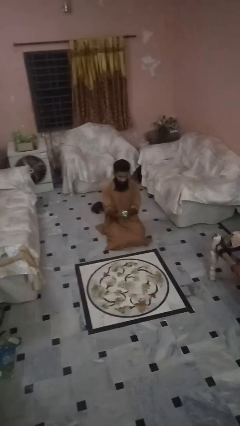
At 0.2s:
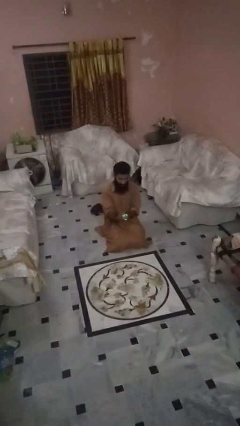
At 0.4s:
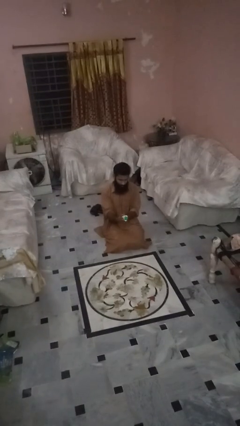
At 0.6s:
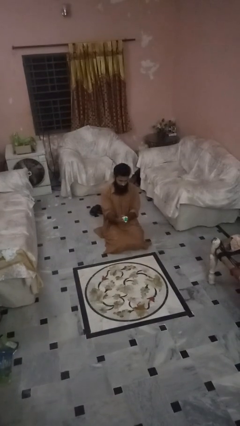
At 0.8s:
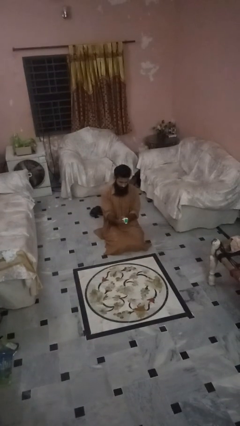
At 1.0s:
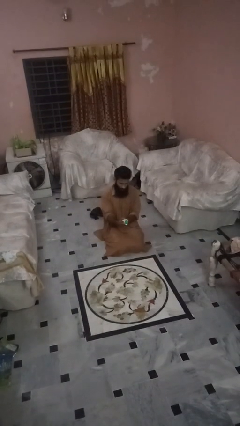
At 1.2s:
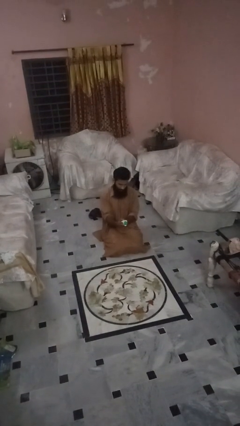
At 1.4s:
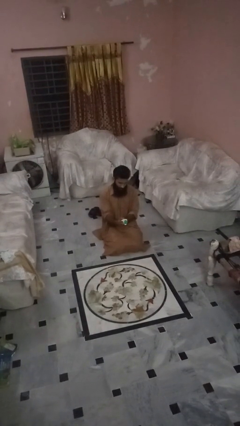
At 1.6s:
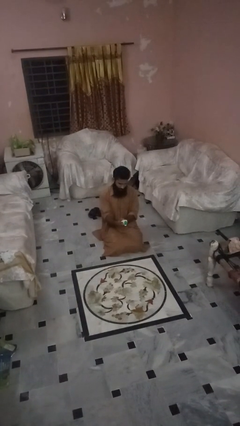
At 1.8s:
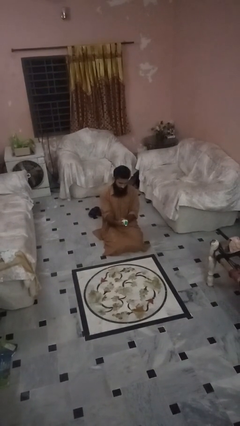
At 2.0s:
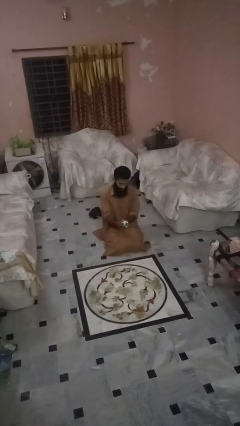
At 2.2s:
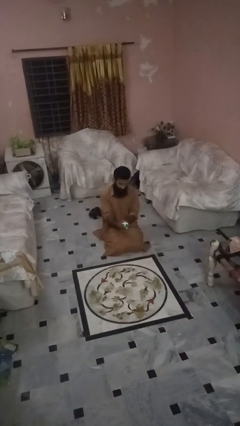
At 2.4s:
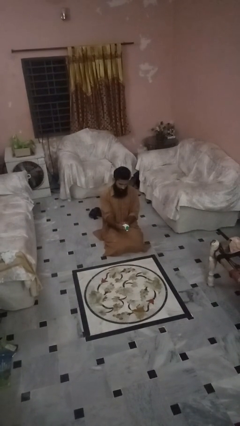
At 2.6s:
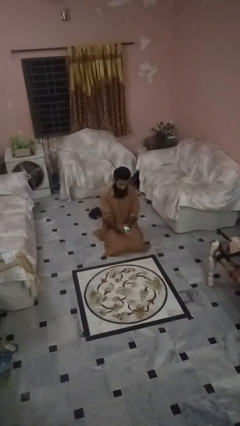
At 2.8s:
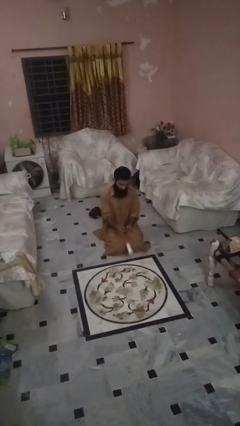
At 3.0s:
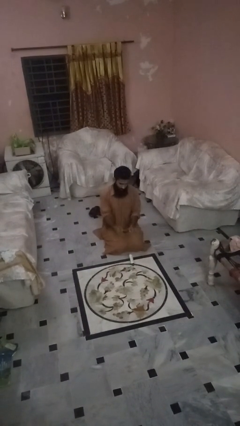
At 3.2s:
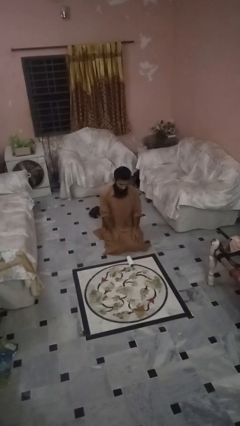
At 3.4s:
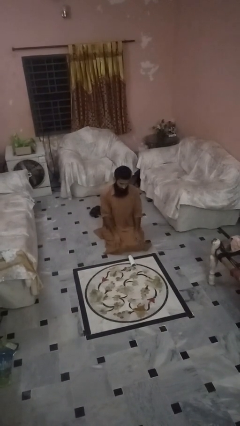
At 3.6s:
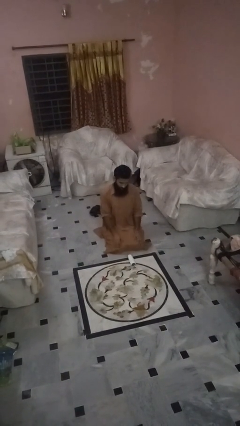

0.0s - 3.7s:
person catches dropped object

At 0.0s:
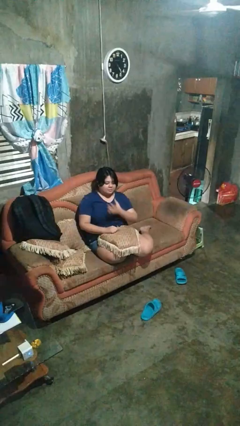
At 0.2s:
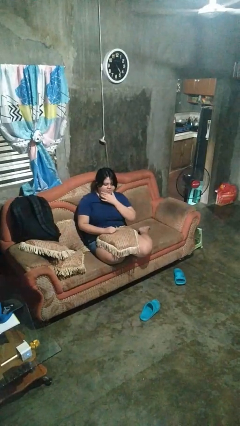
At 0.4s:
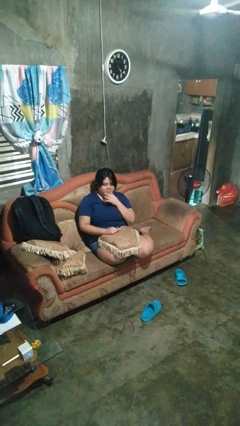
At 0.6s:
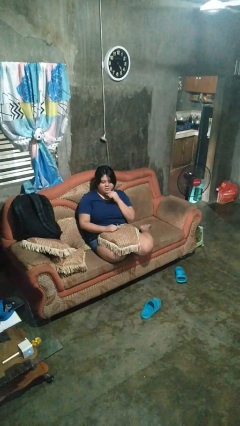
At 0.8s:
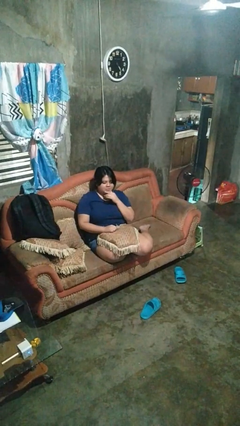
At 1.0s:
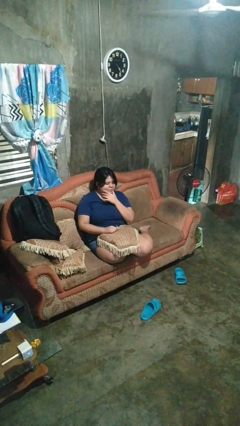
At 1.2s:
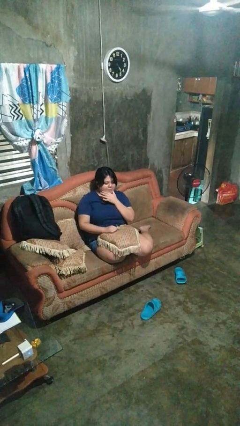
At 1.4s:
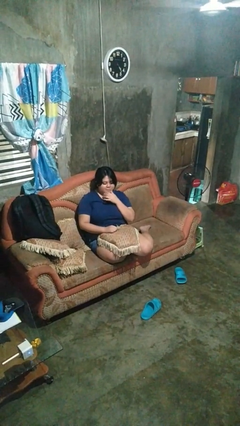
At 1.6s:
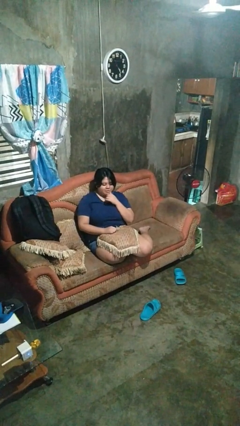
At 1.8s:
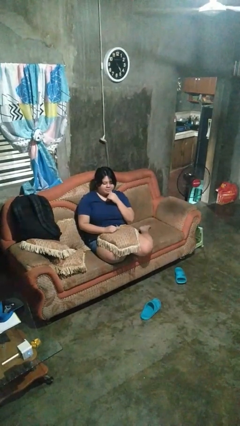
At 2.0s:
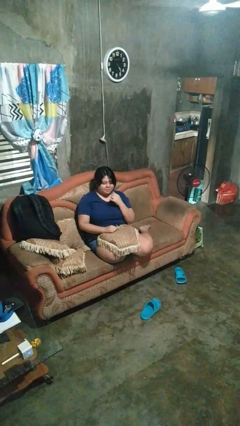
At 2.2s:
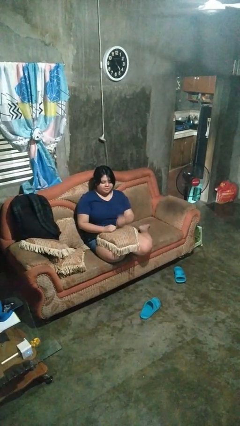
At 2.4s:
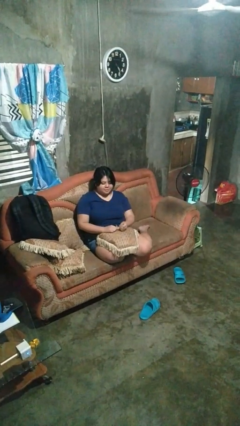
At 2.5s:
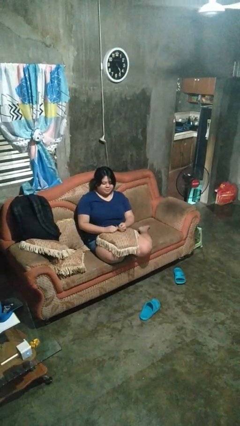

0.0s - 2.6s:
person strokes chin

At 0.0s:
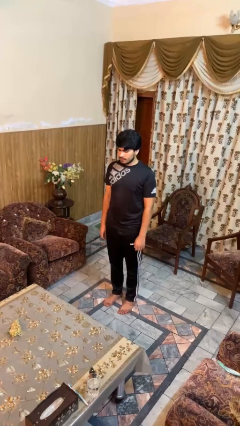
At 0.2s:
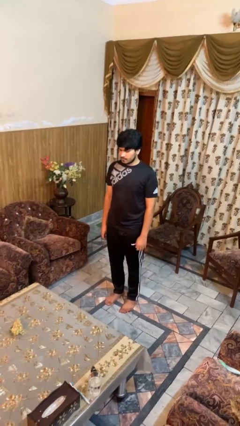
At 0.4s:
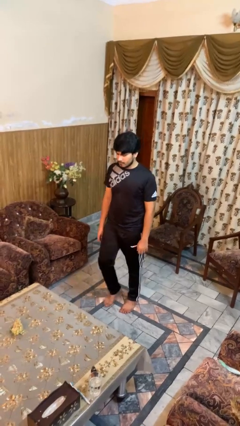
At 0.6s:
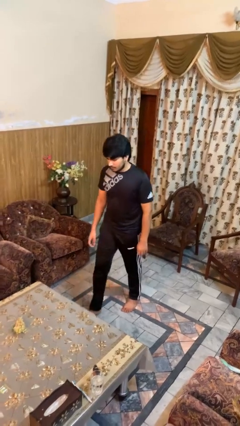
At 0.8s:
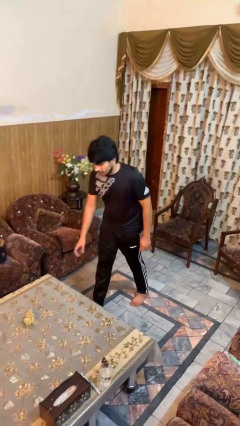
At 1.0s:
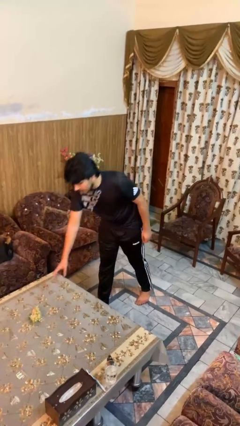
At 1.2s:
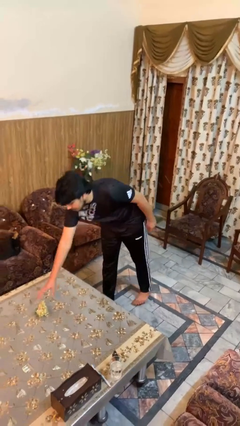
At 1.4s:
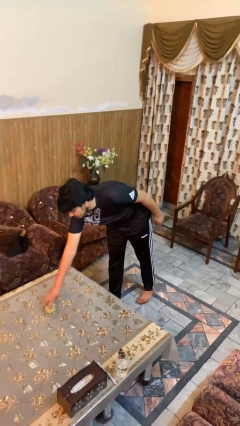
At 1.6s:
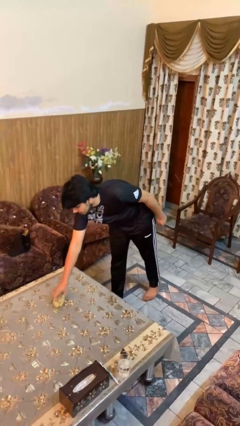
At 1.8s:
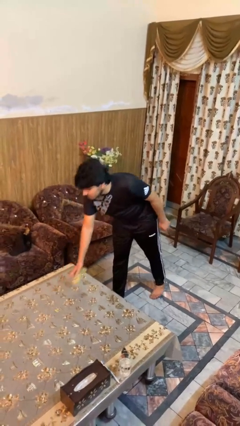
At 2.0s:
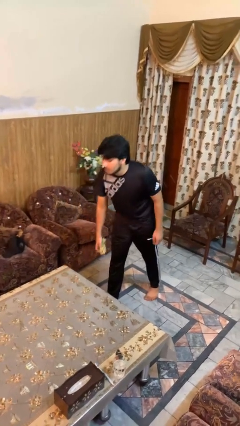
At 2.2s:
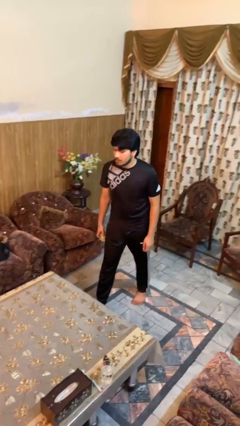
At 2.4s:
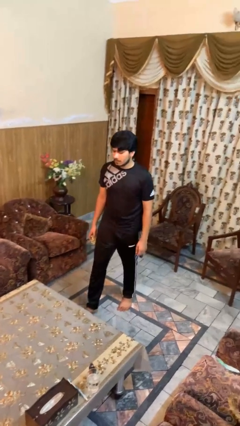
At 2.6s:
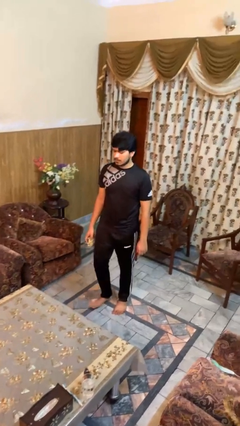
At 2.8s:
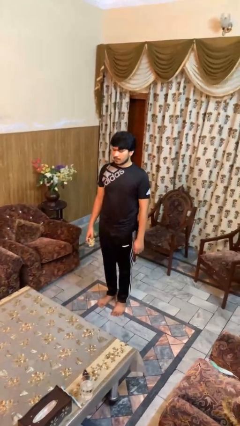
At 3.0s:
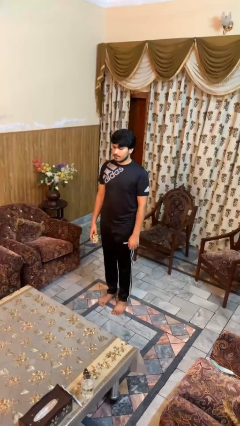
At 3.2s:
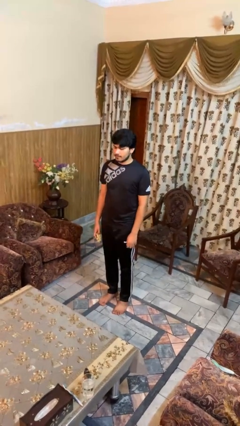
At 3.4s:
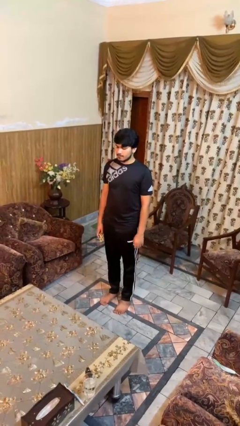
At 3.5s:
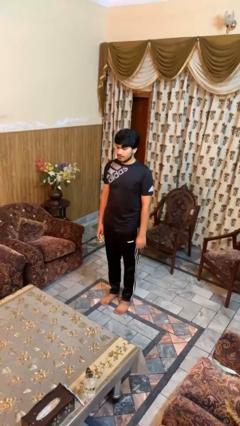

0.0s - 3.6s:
person picks up object from table

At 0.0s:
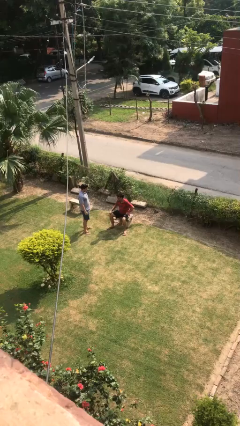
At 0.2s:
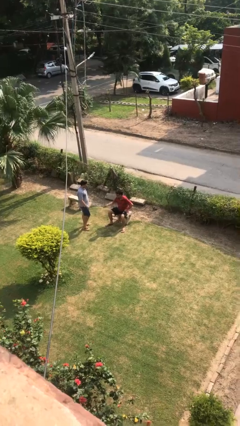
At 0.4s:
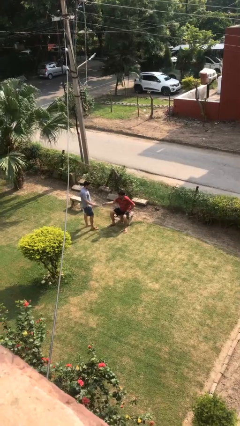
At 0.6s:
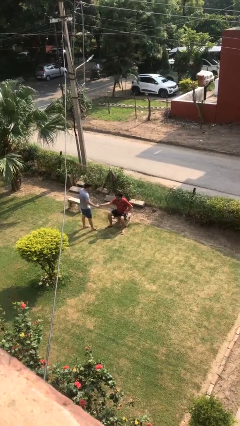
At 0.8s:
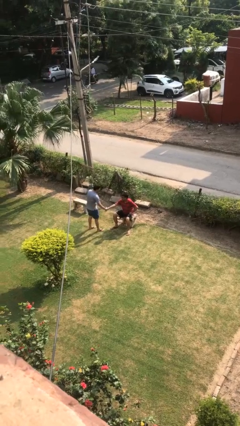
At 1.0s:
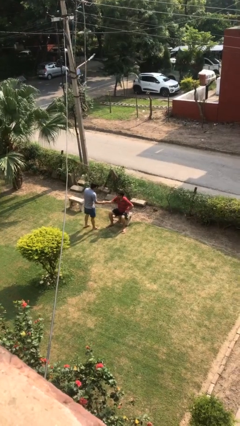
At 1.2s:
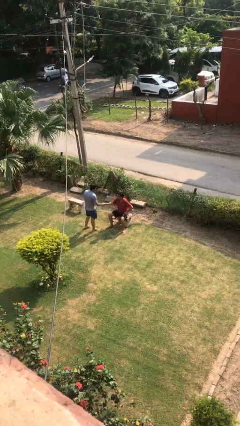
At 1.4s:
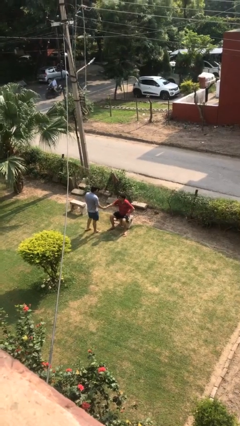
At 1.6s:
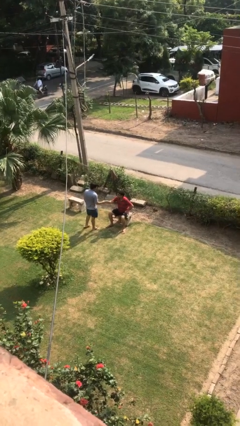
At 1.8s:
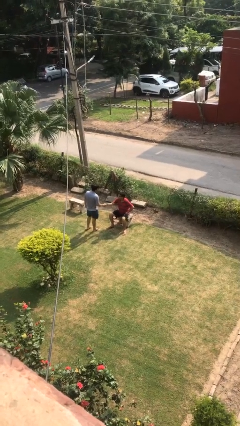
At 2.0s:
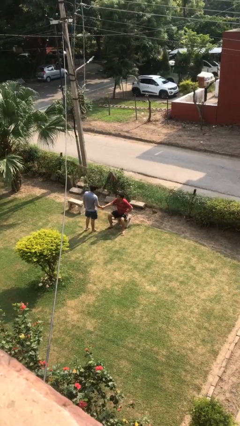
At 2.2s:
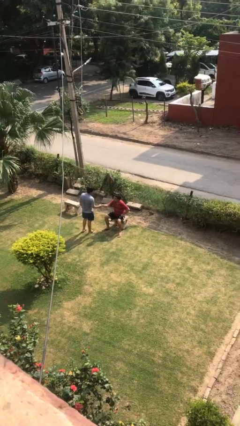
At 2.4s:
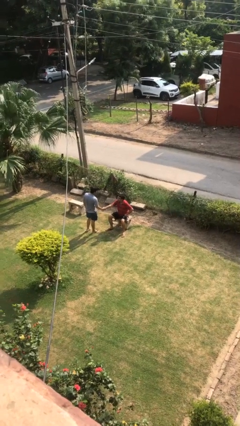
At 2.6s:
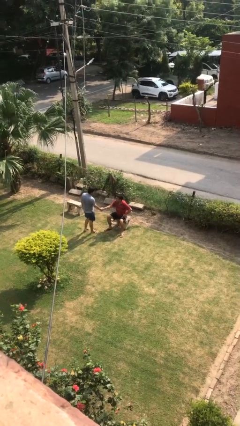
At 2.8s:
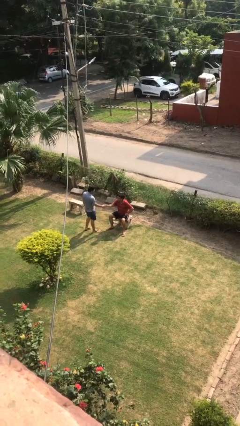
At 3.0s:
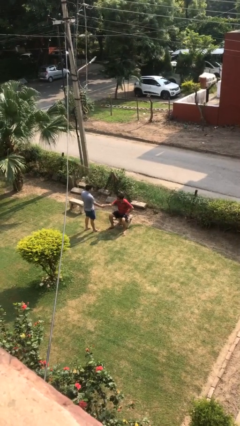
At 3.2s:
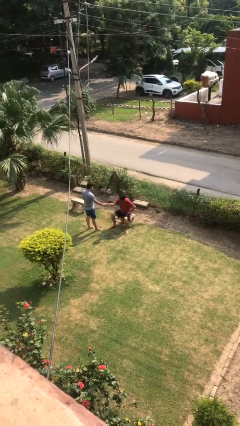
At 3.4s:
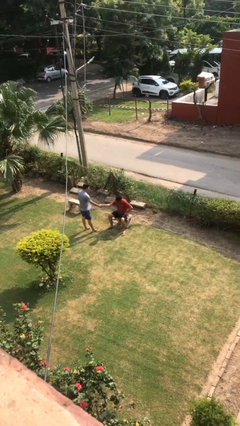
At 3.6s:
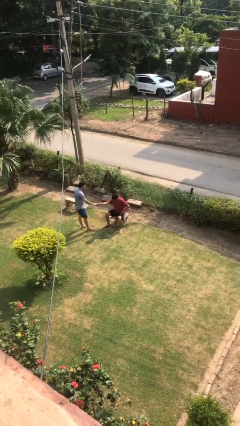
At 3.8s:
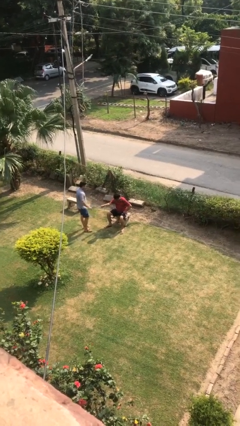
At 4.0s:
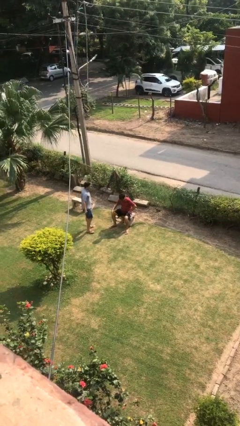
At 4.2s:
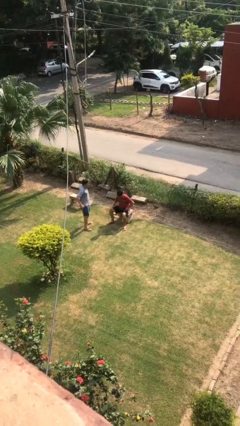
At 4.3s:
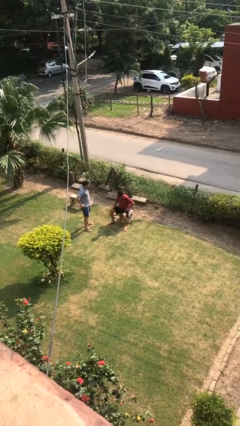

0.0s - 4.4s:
person shakes hand

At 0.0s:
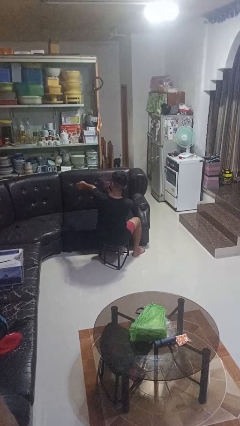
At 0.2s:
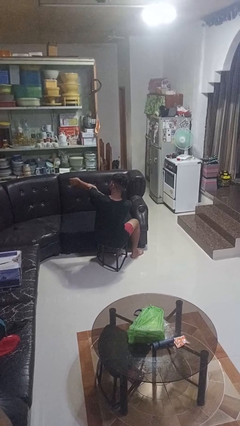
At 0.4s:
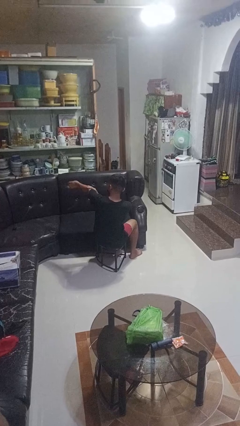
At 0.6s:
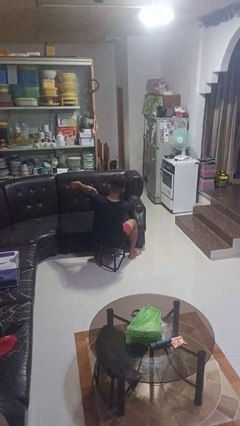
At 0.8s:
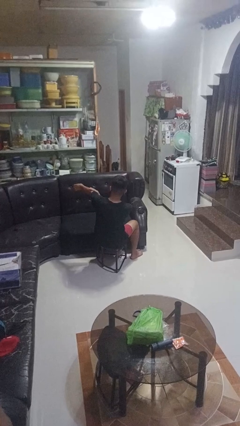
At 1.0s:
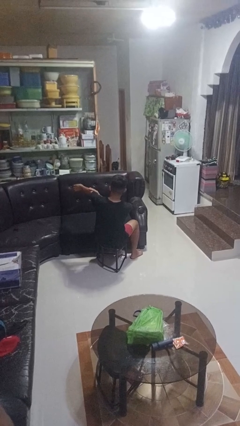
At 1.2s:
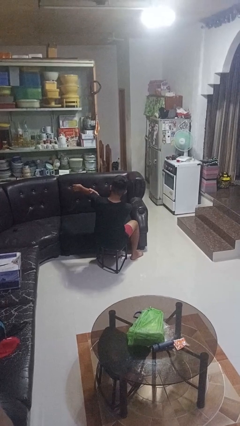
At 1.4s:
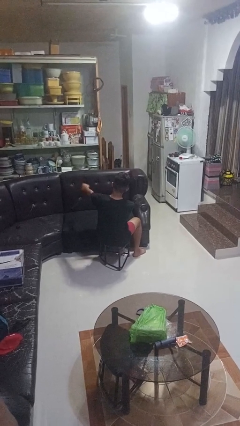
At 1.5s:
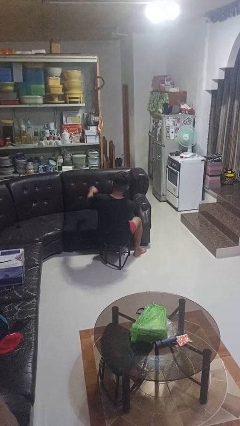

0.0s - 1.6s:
person swats bug

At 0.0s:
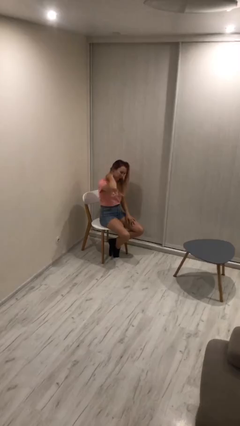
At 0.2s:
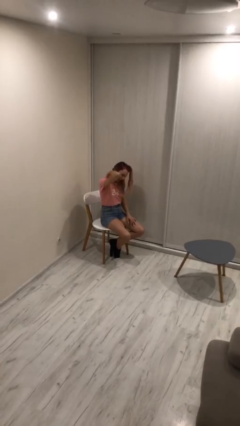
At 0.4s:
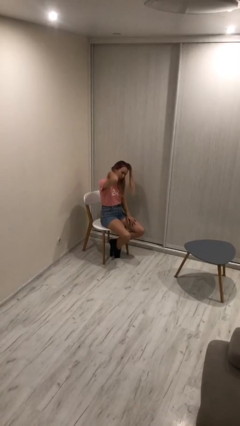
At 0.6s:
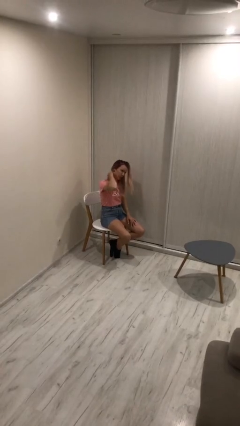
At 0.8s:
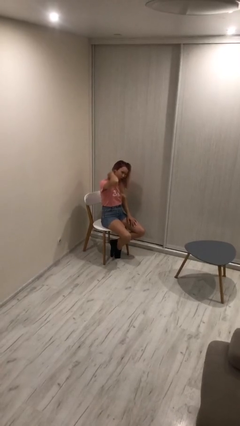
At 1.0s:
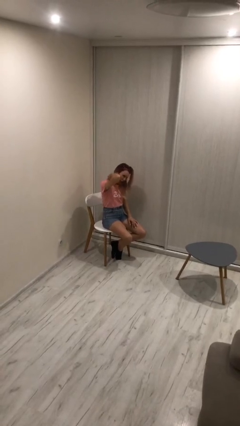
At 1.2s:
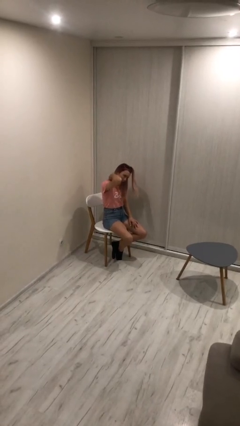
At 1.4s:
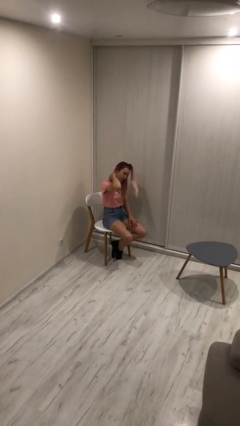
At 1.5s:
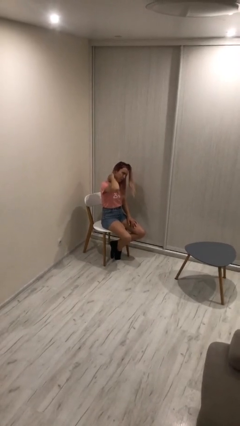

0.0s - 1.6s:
person rubs neck
